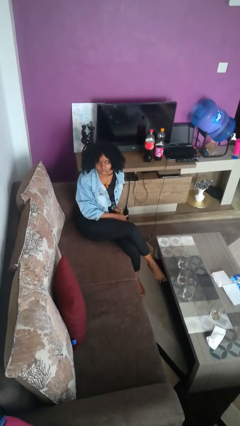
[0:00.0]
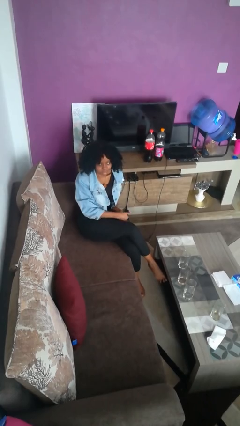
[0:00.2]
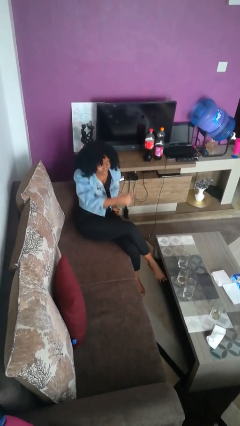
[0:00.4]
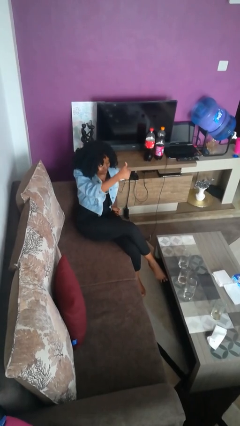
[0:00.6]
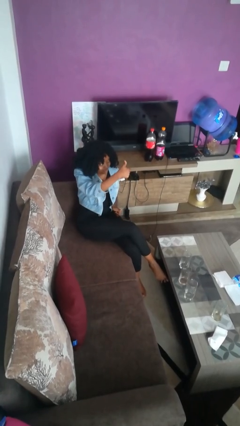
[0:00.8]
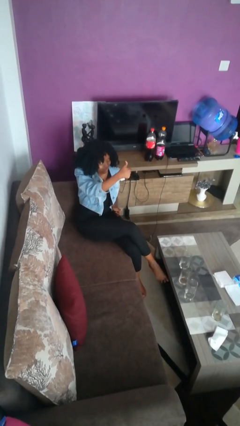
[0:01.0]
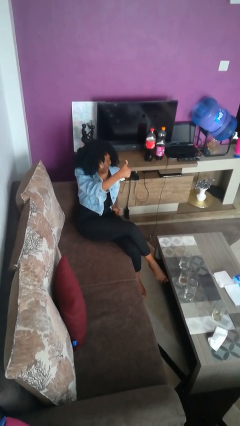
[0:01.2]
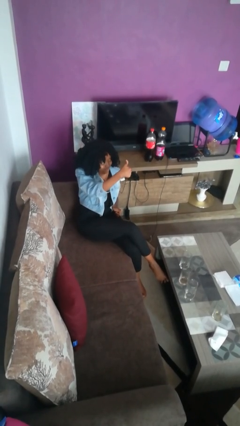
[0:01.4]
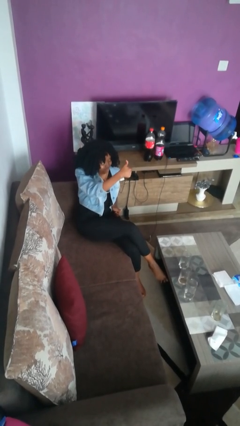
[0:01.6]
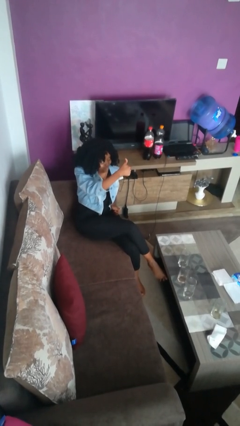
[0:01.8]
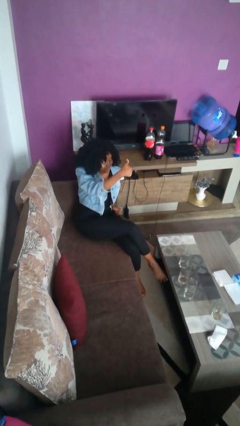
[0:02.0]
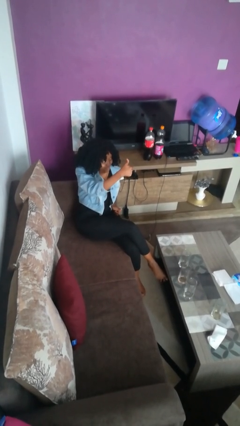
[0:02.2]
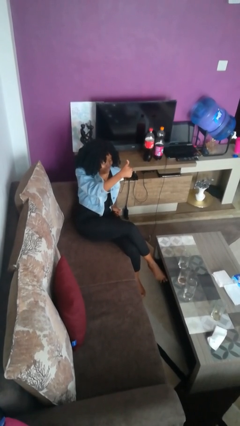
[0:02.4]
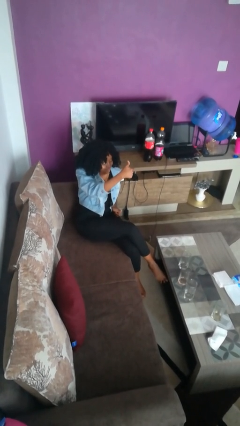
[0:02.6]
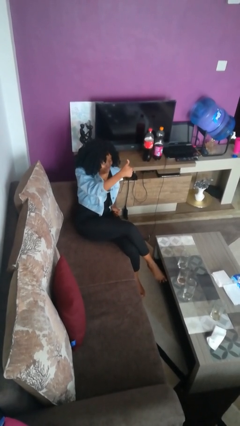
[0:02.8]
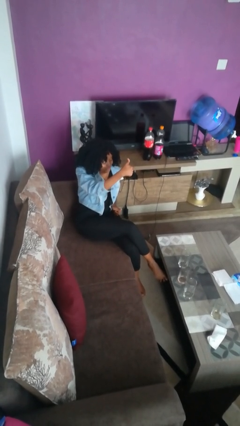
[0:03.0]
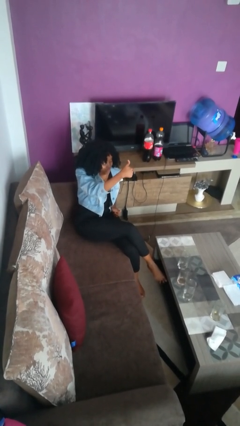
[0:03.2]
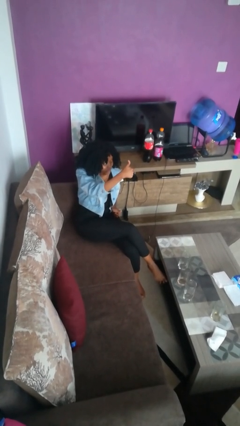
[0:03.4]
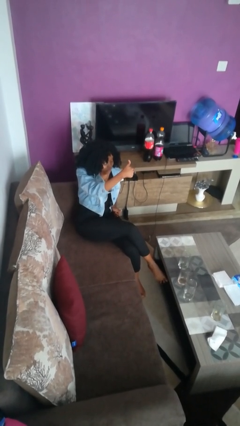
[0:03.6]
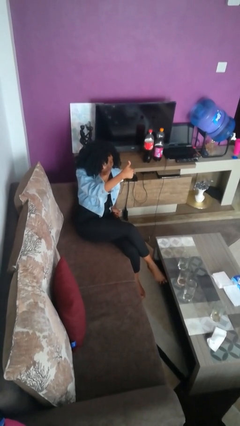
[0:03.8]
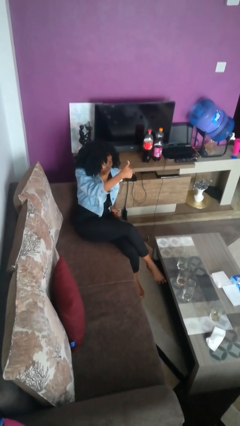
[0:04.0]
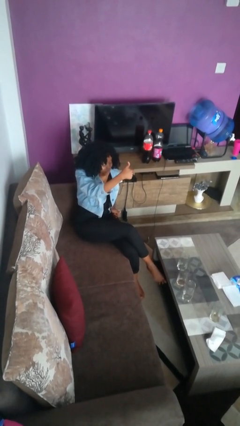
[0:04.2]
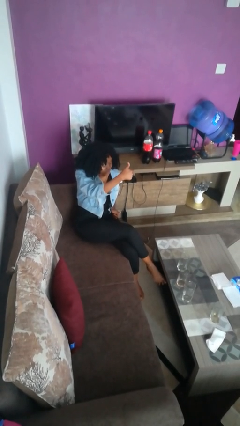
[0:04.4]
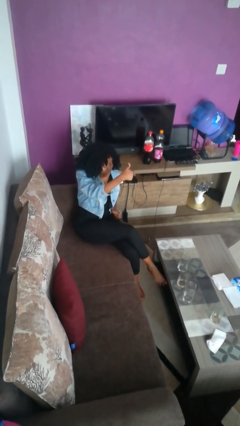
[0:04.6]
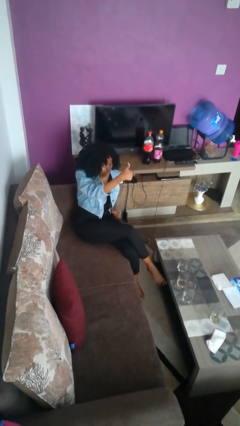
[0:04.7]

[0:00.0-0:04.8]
person gestures thumbs up

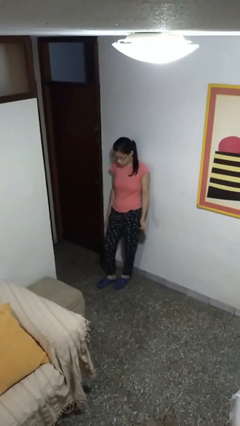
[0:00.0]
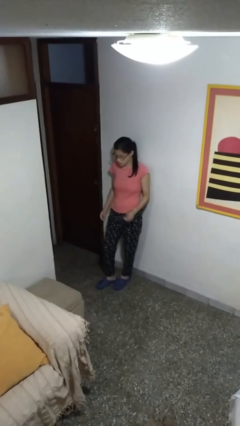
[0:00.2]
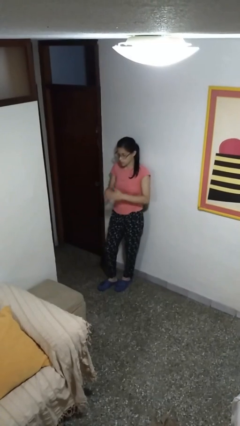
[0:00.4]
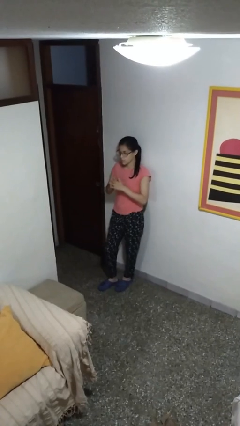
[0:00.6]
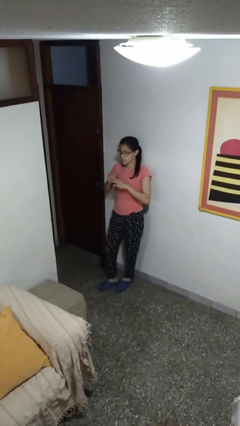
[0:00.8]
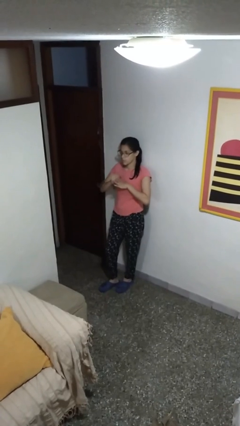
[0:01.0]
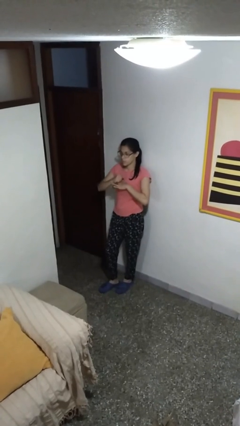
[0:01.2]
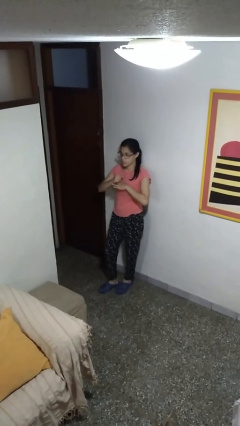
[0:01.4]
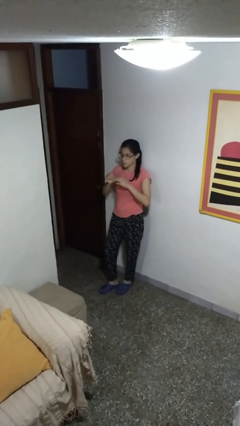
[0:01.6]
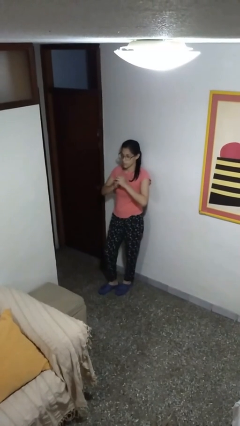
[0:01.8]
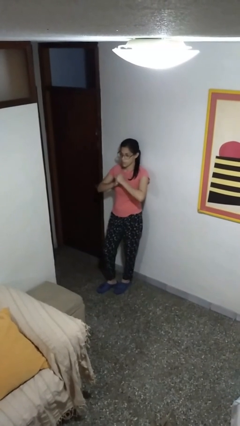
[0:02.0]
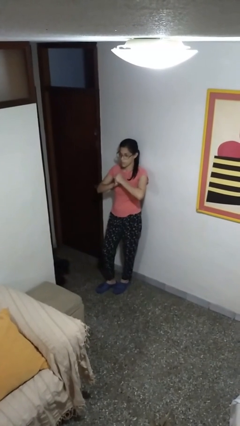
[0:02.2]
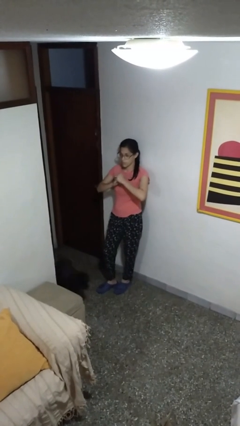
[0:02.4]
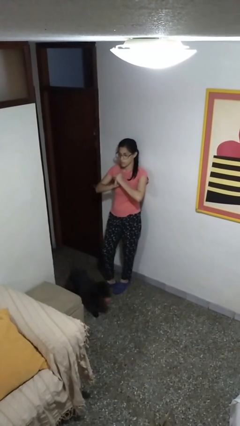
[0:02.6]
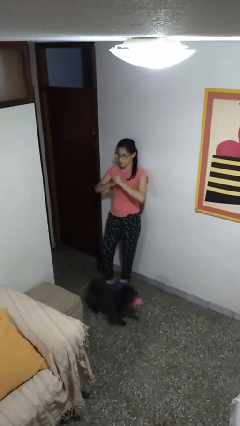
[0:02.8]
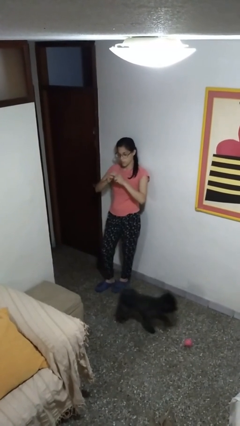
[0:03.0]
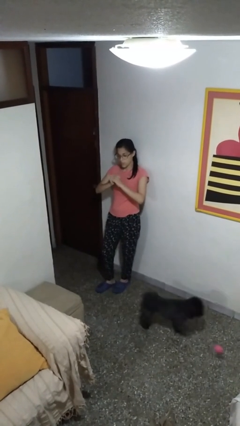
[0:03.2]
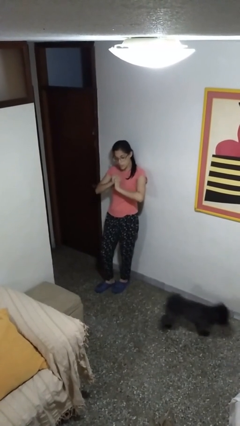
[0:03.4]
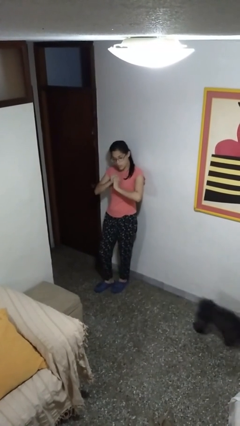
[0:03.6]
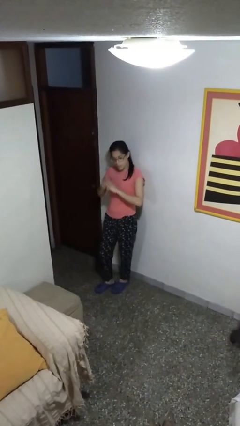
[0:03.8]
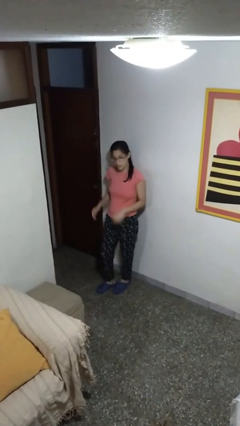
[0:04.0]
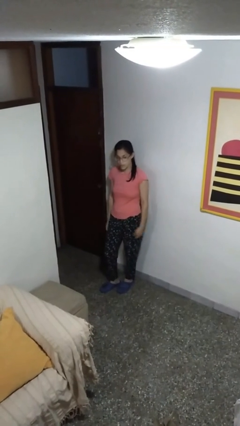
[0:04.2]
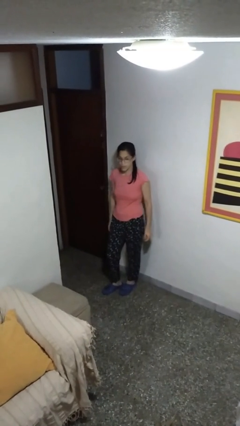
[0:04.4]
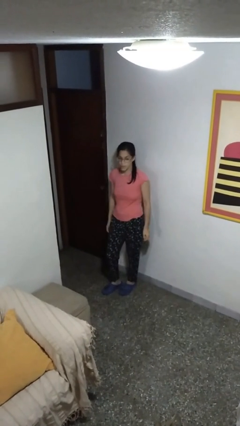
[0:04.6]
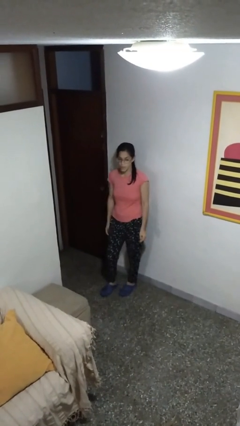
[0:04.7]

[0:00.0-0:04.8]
person cracks knuckles

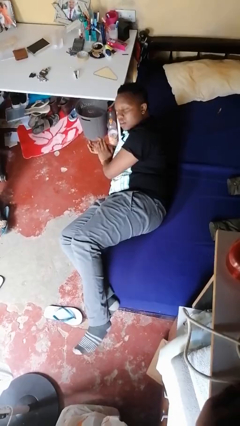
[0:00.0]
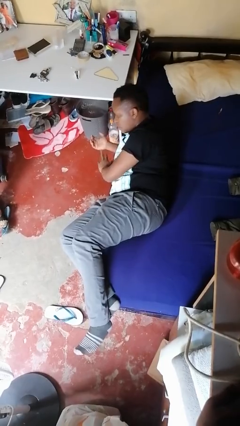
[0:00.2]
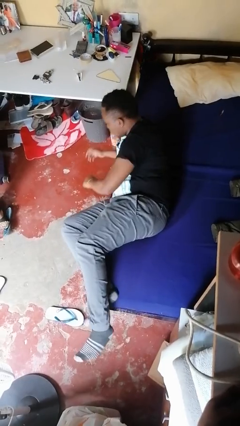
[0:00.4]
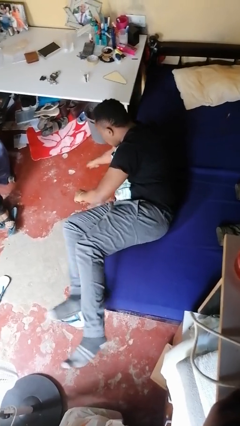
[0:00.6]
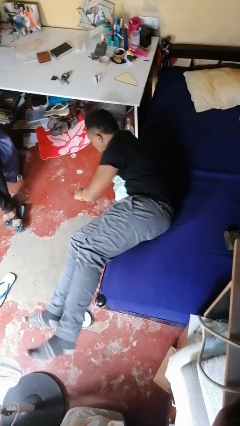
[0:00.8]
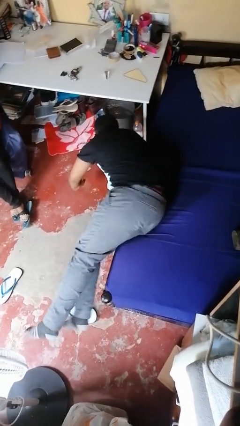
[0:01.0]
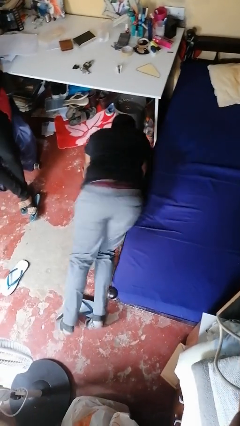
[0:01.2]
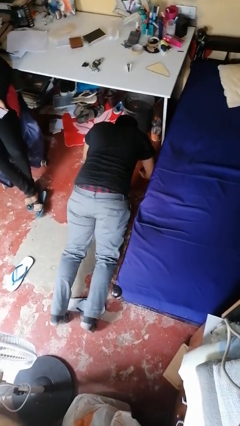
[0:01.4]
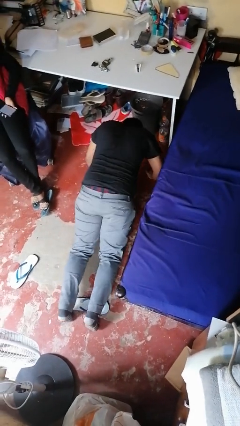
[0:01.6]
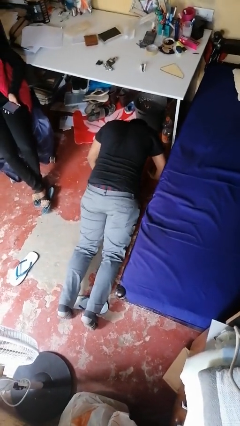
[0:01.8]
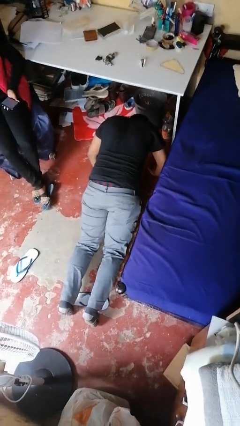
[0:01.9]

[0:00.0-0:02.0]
person falls from bed

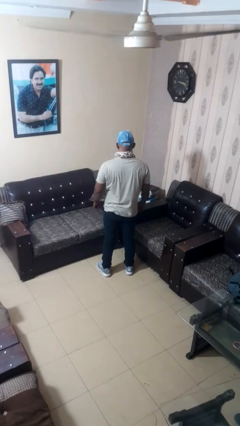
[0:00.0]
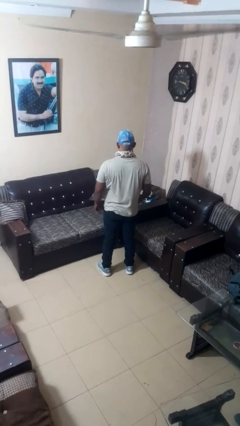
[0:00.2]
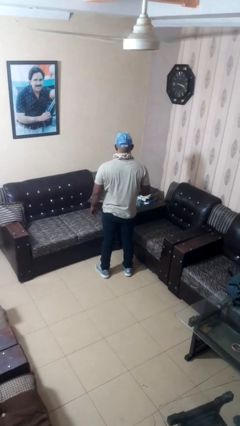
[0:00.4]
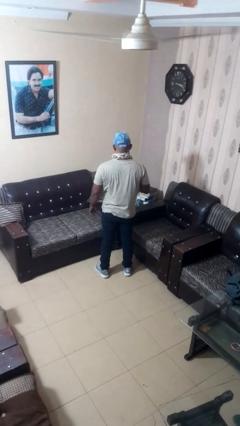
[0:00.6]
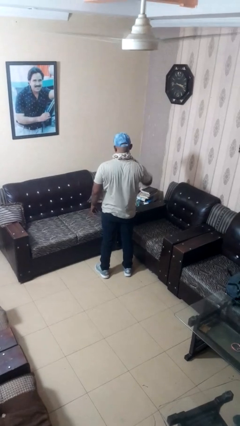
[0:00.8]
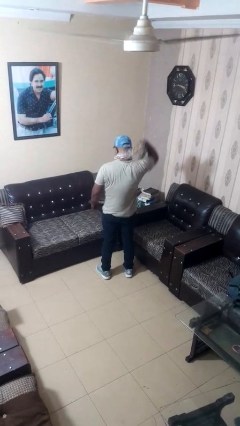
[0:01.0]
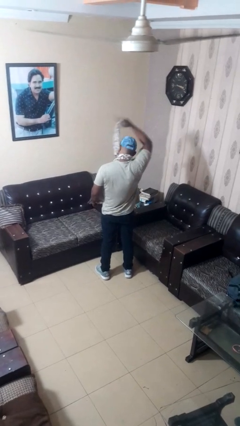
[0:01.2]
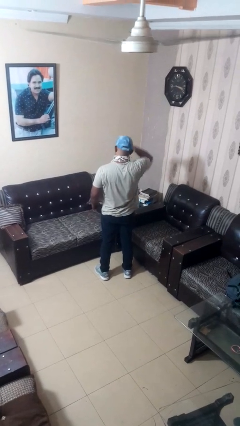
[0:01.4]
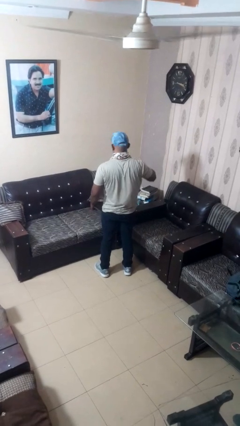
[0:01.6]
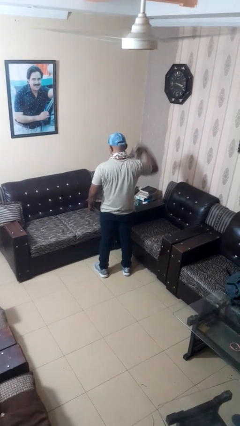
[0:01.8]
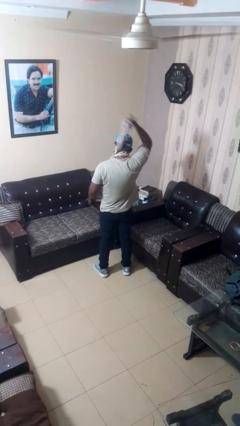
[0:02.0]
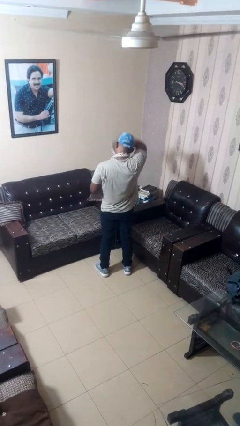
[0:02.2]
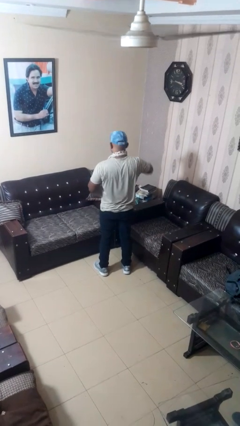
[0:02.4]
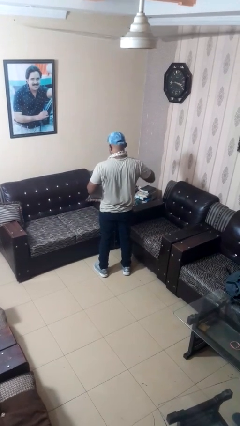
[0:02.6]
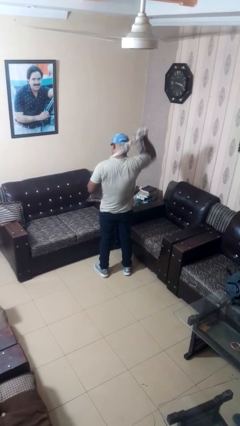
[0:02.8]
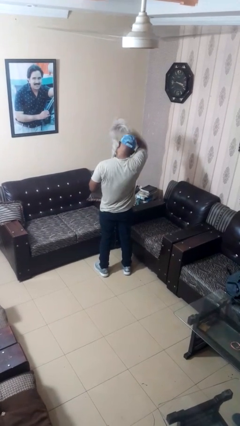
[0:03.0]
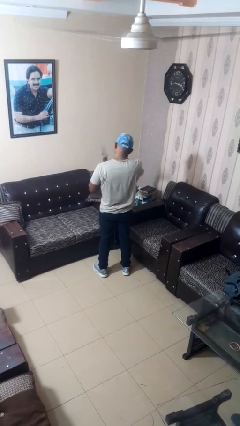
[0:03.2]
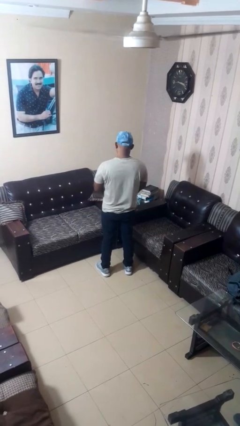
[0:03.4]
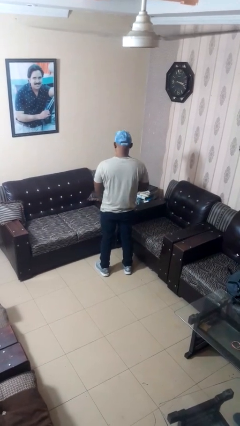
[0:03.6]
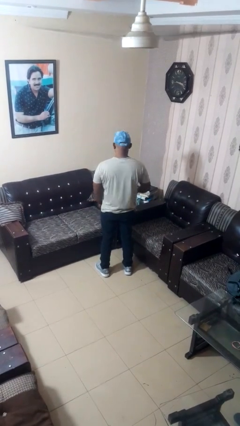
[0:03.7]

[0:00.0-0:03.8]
person takes off scarf

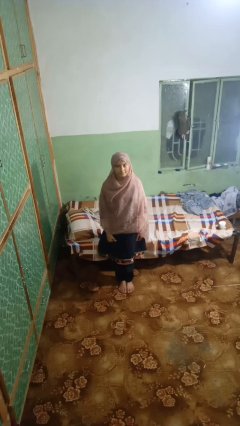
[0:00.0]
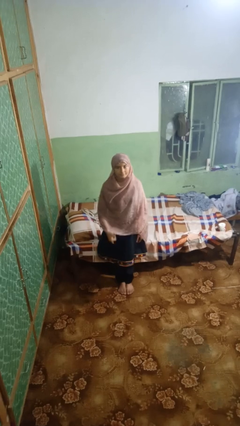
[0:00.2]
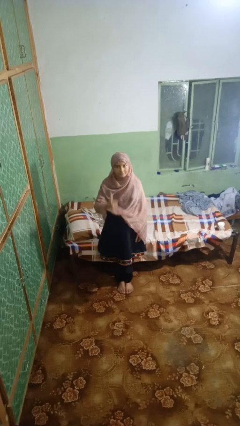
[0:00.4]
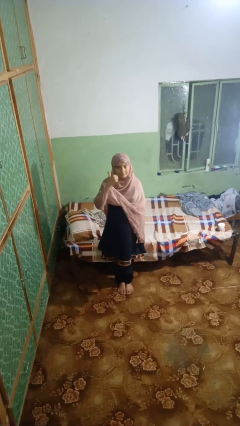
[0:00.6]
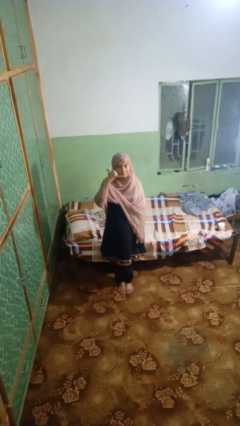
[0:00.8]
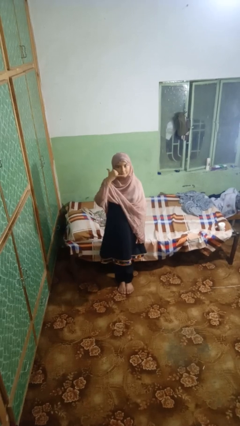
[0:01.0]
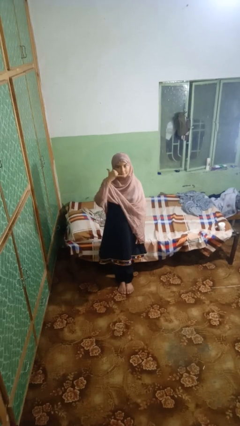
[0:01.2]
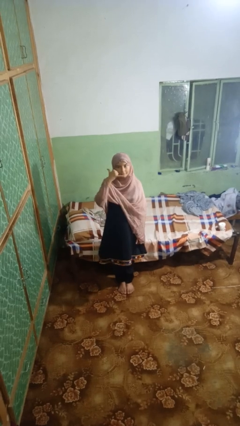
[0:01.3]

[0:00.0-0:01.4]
person gestures call me

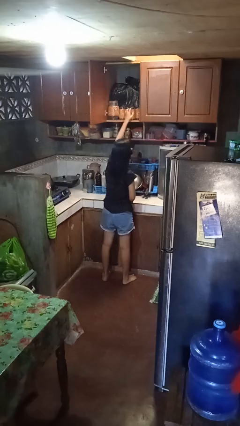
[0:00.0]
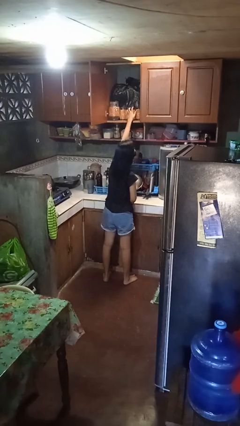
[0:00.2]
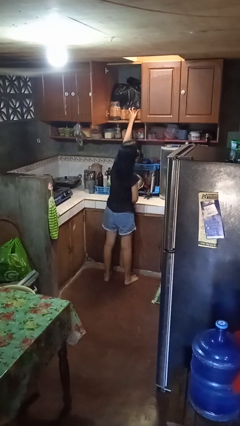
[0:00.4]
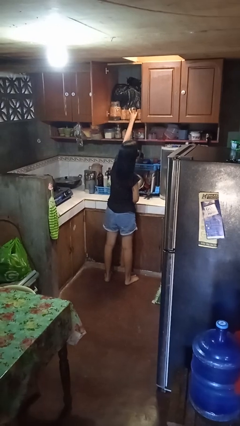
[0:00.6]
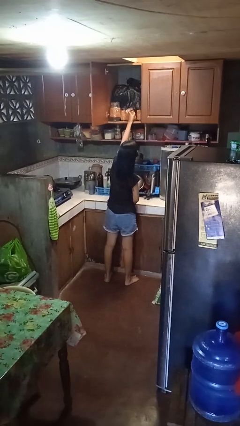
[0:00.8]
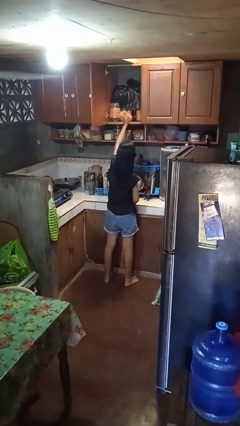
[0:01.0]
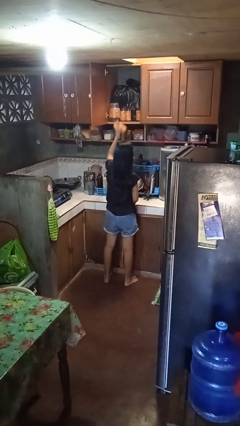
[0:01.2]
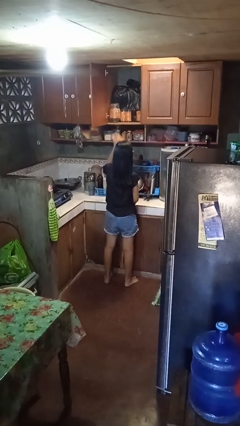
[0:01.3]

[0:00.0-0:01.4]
person picks up object from cabinet
